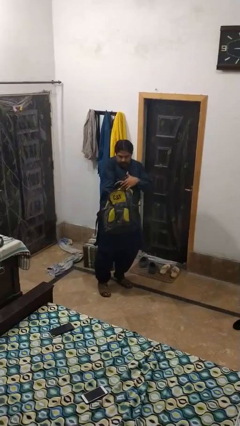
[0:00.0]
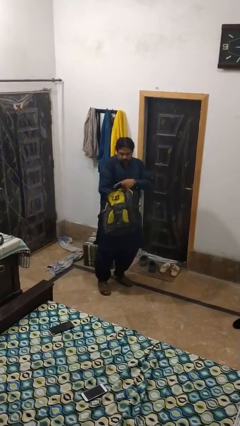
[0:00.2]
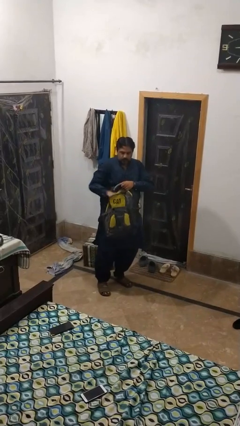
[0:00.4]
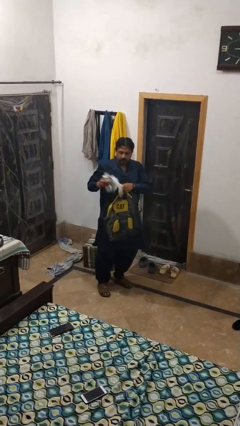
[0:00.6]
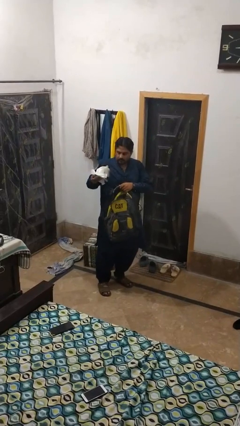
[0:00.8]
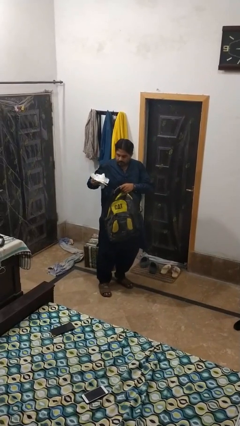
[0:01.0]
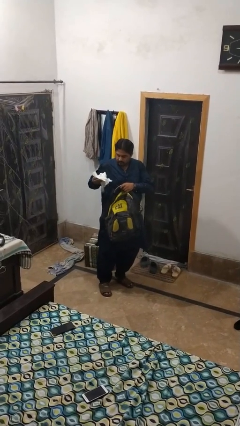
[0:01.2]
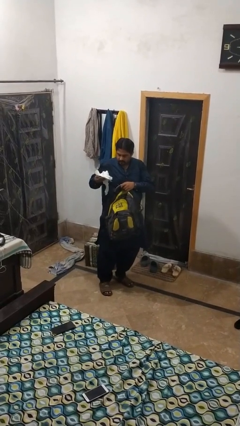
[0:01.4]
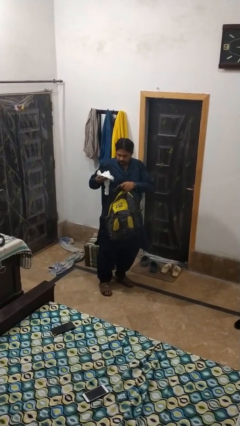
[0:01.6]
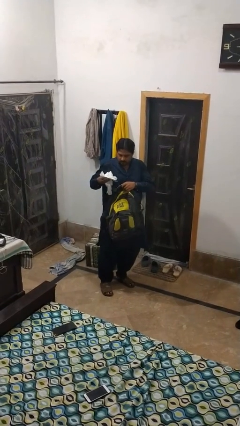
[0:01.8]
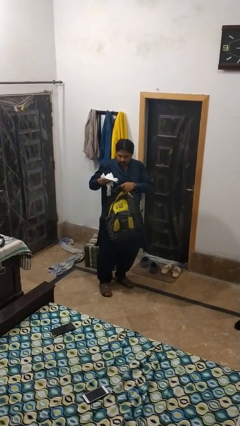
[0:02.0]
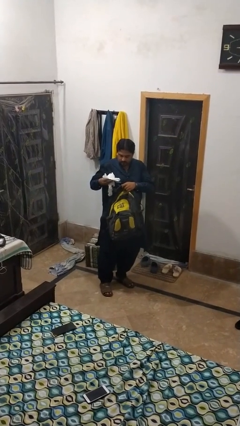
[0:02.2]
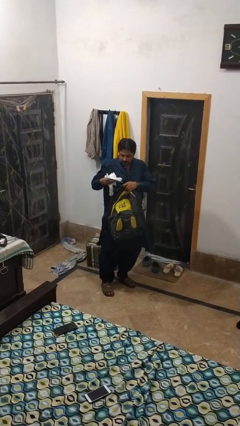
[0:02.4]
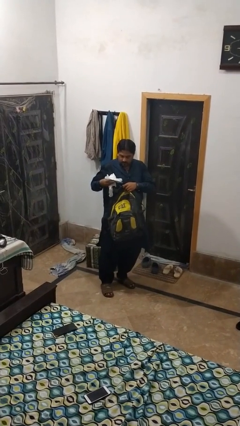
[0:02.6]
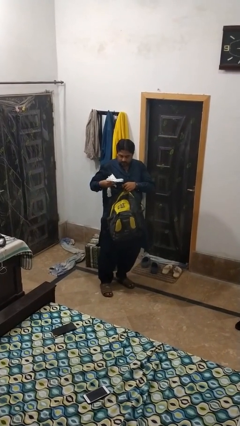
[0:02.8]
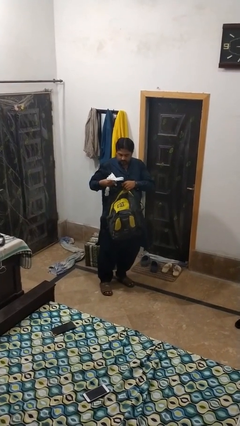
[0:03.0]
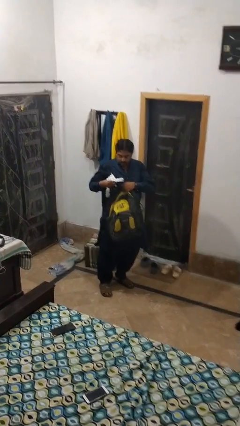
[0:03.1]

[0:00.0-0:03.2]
person takes object from backpack

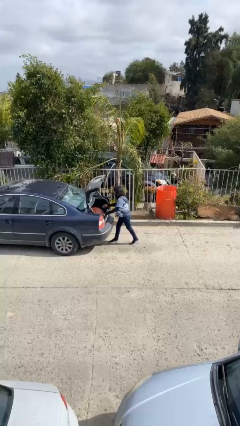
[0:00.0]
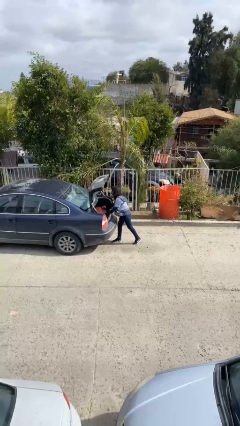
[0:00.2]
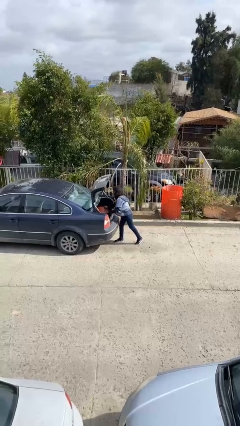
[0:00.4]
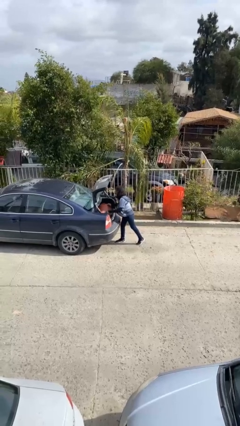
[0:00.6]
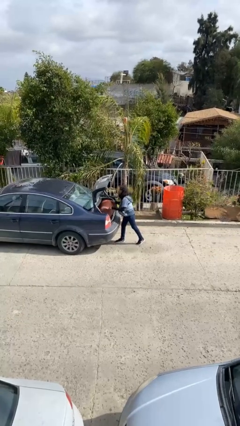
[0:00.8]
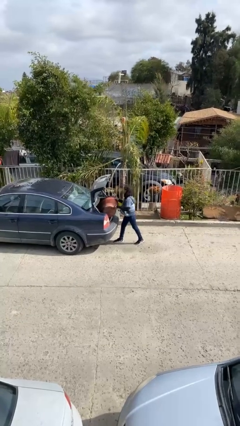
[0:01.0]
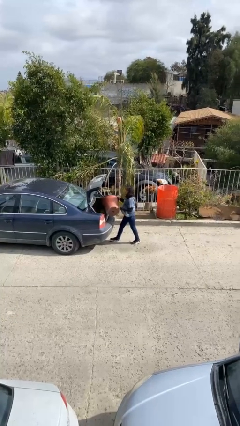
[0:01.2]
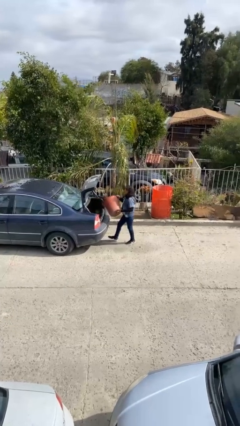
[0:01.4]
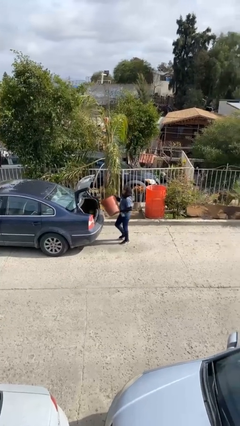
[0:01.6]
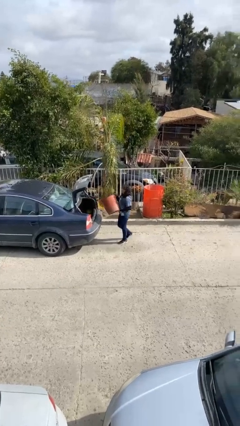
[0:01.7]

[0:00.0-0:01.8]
person unloads car

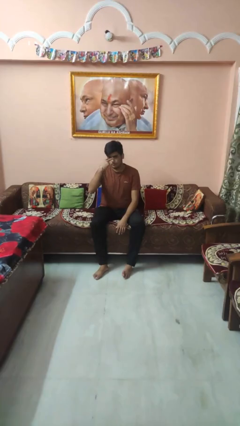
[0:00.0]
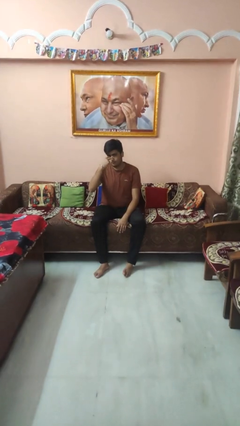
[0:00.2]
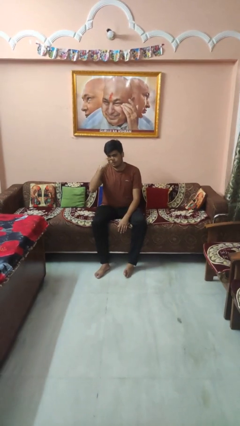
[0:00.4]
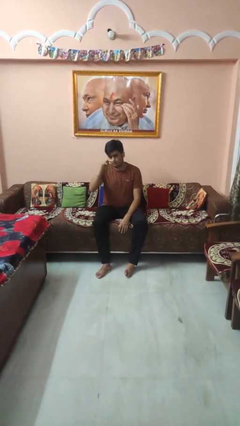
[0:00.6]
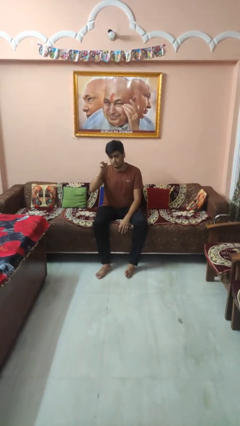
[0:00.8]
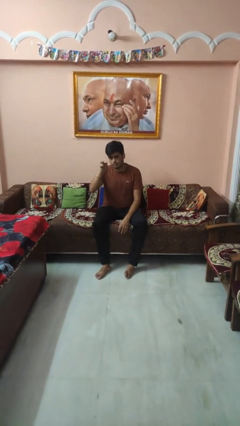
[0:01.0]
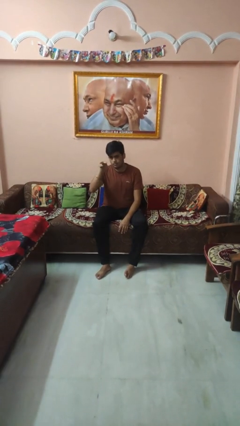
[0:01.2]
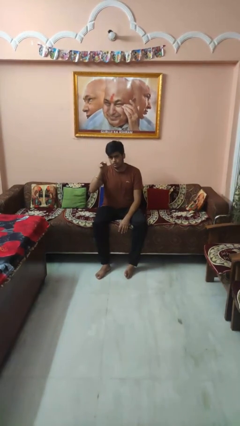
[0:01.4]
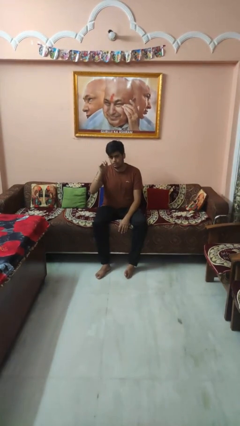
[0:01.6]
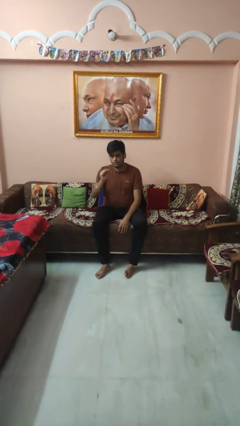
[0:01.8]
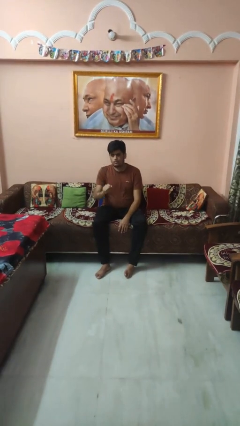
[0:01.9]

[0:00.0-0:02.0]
person gestures watch closely

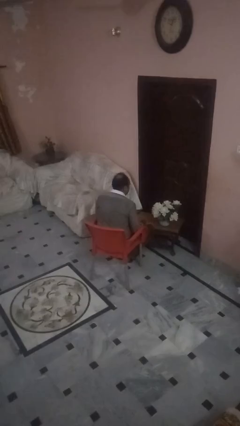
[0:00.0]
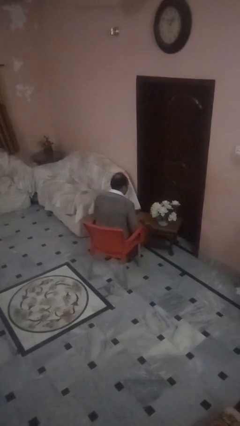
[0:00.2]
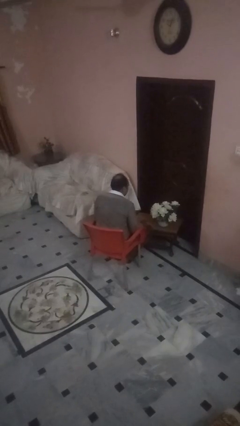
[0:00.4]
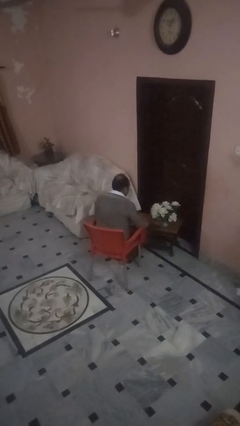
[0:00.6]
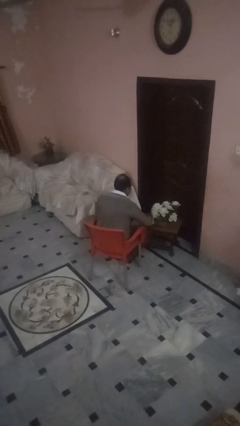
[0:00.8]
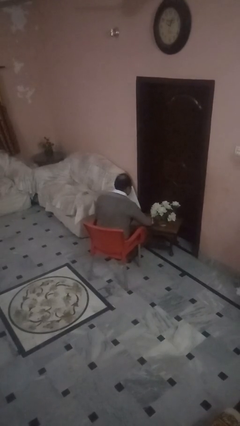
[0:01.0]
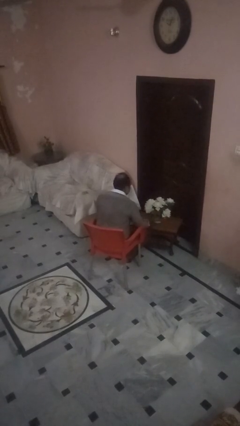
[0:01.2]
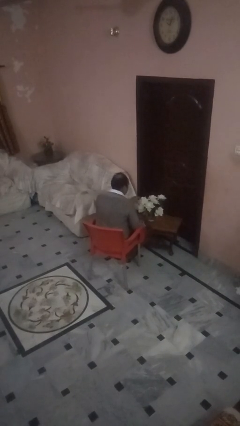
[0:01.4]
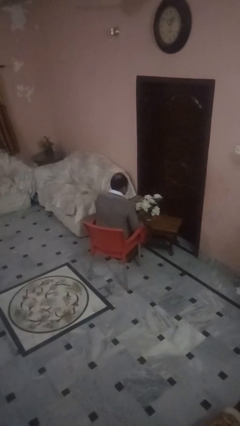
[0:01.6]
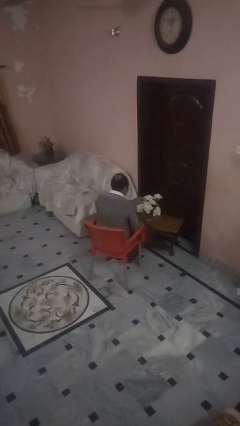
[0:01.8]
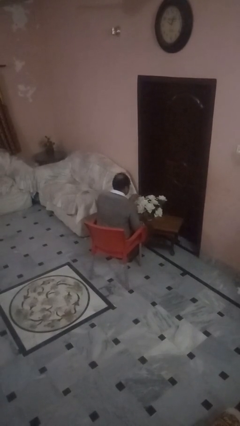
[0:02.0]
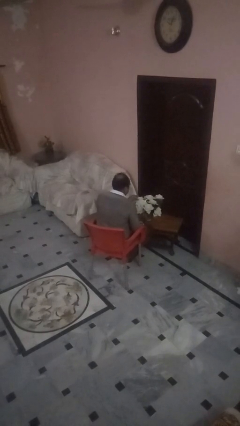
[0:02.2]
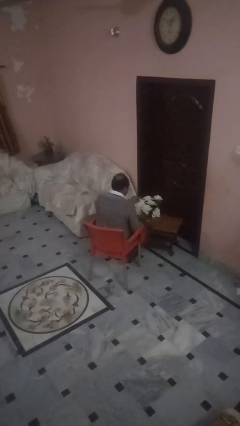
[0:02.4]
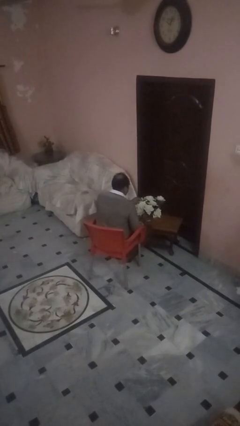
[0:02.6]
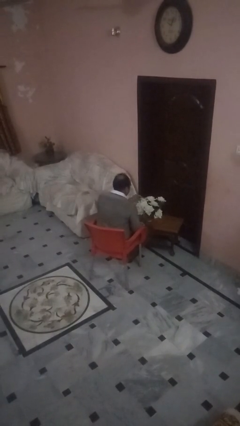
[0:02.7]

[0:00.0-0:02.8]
person arranges flowers in vase

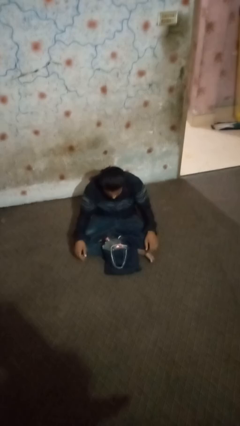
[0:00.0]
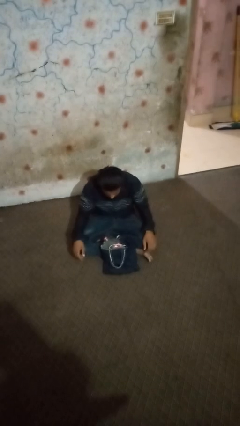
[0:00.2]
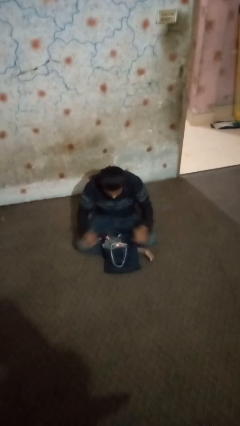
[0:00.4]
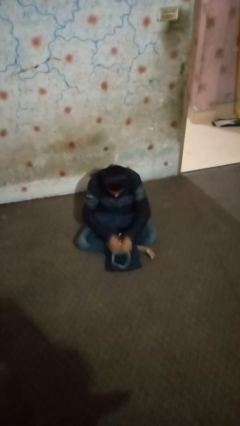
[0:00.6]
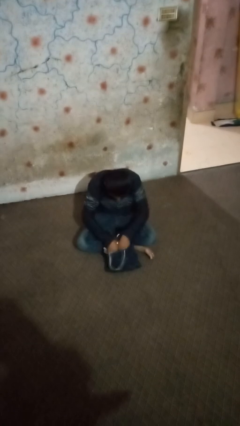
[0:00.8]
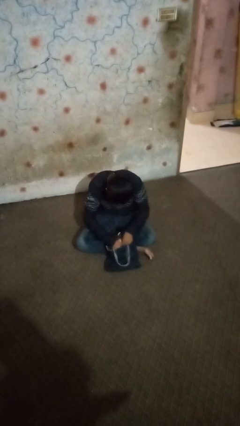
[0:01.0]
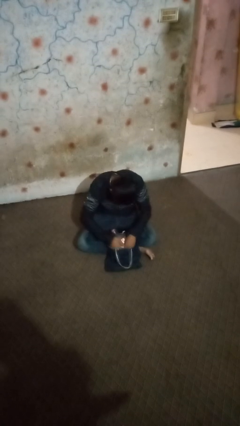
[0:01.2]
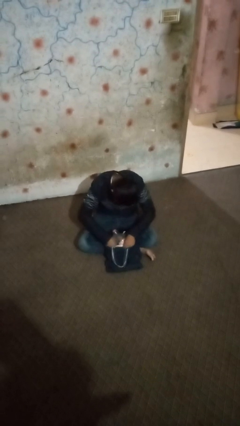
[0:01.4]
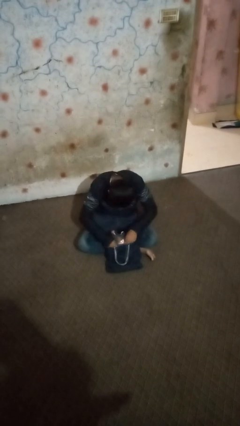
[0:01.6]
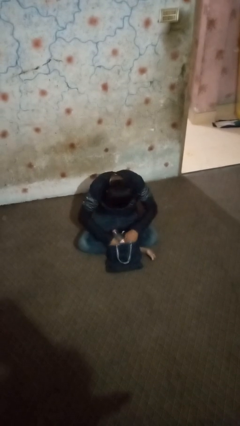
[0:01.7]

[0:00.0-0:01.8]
person searches in bag

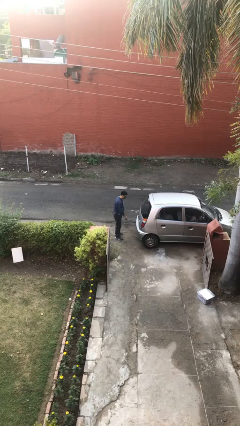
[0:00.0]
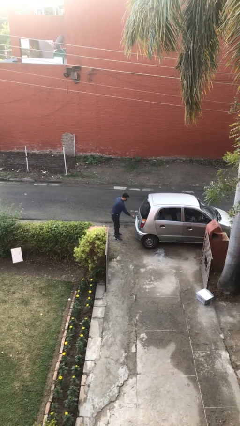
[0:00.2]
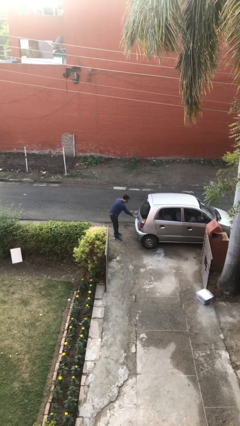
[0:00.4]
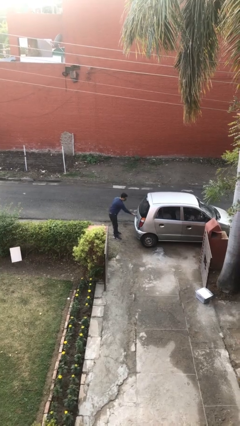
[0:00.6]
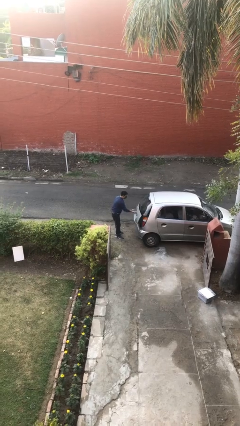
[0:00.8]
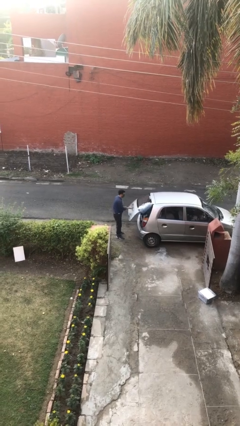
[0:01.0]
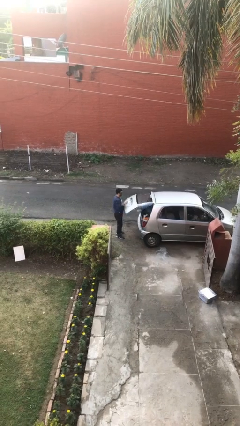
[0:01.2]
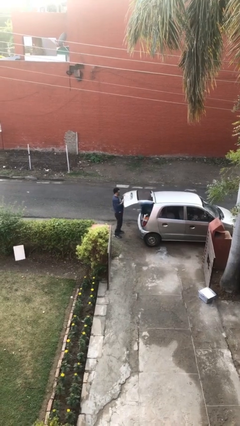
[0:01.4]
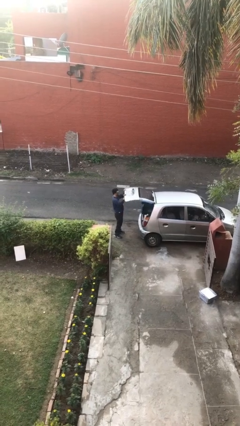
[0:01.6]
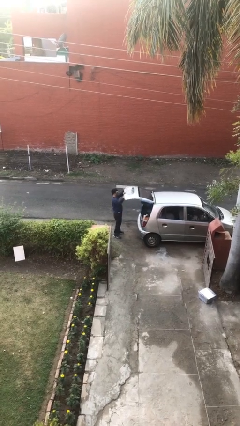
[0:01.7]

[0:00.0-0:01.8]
person opens car trunk

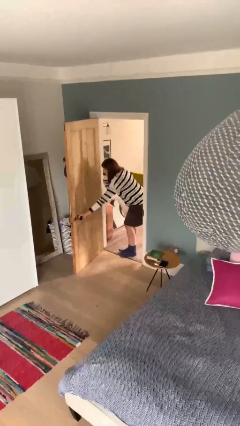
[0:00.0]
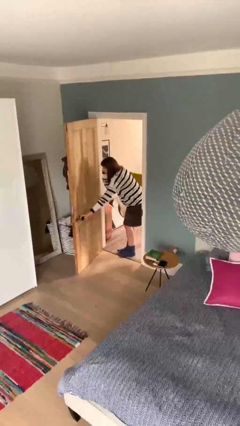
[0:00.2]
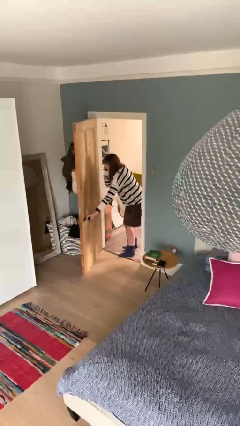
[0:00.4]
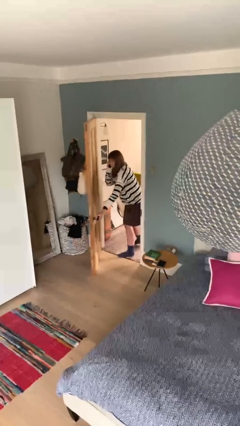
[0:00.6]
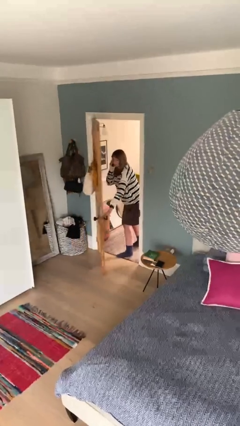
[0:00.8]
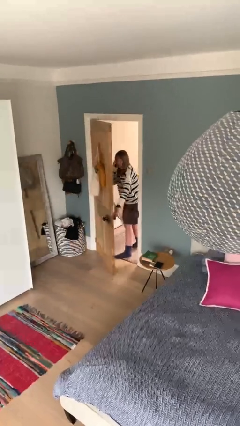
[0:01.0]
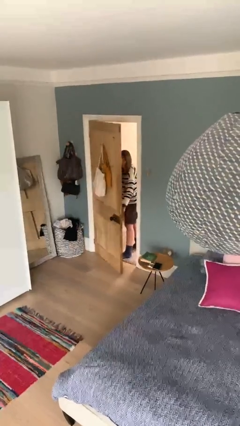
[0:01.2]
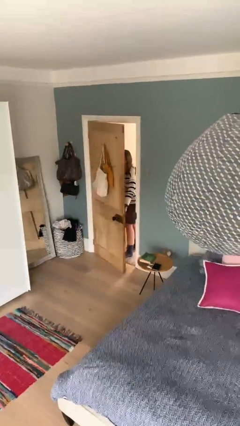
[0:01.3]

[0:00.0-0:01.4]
person closes facility door

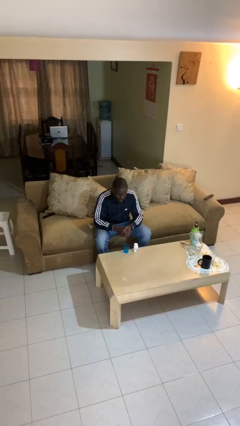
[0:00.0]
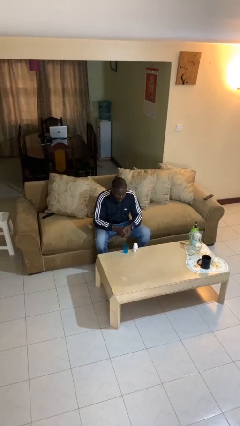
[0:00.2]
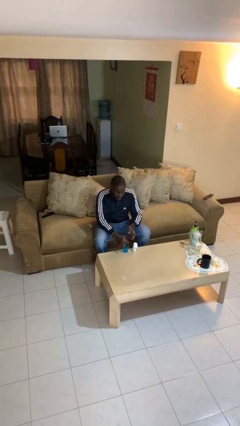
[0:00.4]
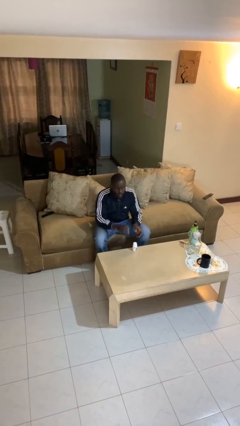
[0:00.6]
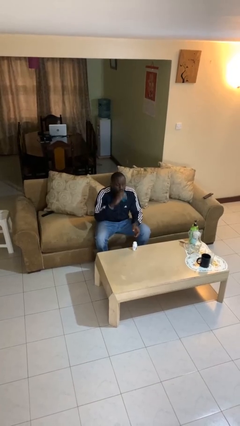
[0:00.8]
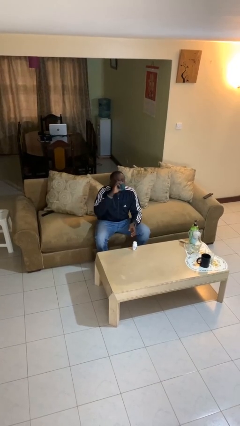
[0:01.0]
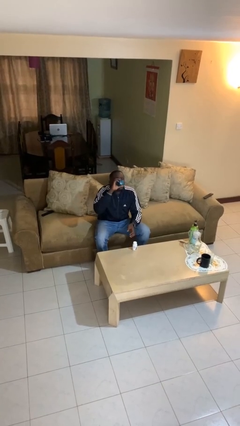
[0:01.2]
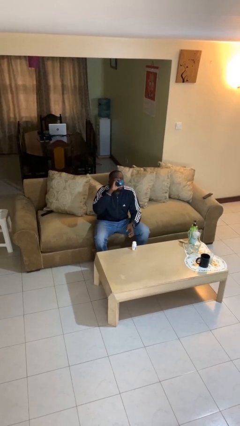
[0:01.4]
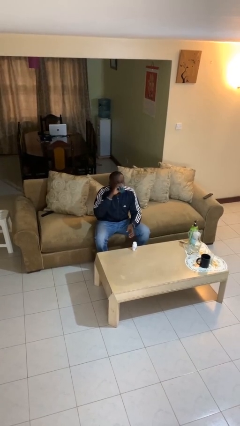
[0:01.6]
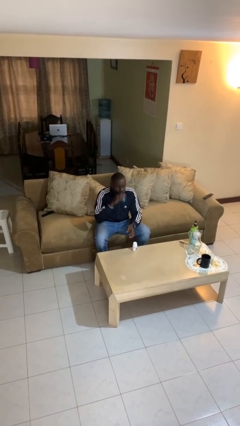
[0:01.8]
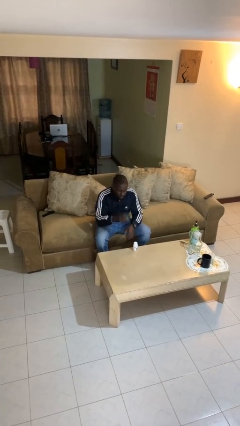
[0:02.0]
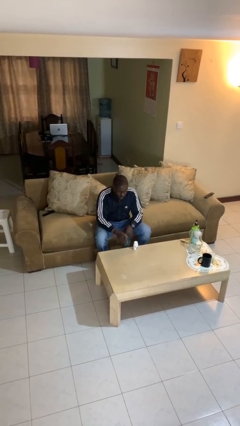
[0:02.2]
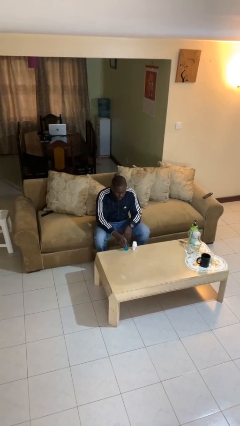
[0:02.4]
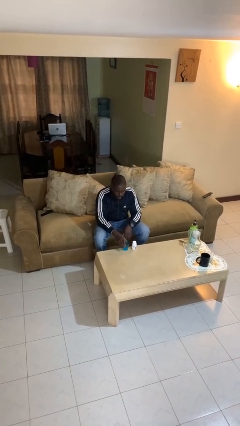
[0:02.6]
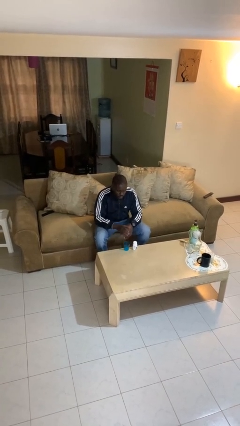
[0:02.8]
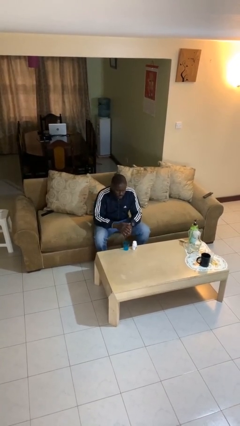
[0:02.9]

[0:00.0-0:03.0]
person drinks from cup
